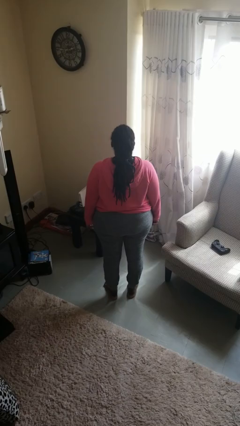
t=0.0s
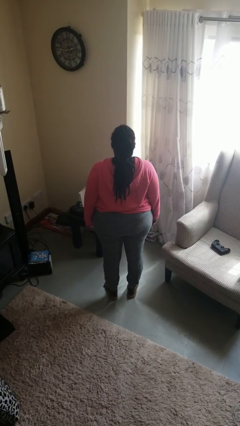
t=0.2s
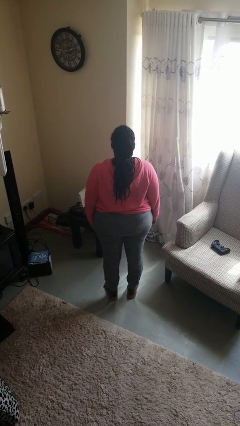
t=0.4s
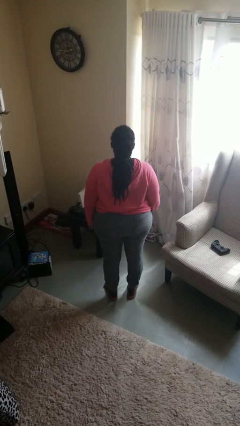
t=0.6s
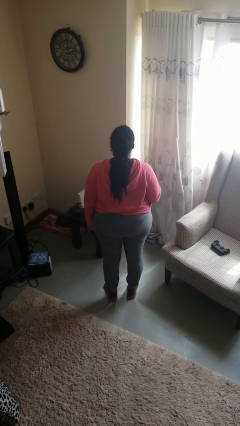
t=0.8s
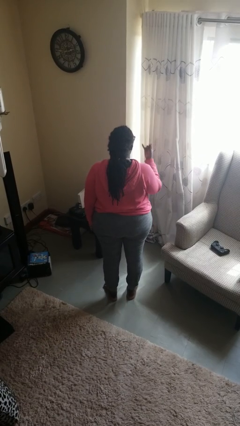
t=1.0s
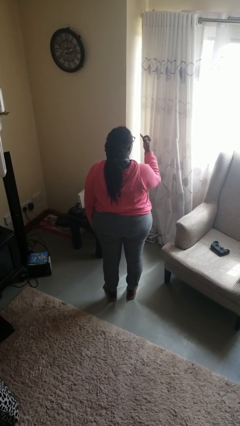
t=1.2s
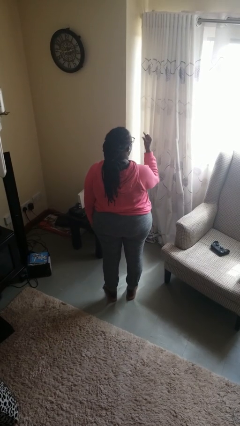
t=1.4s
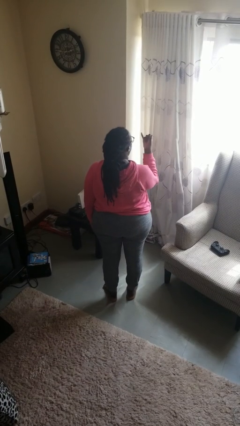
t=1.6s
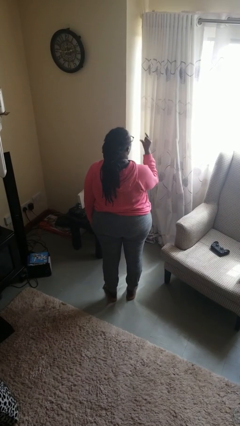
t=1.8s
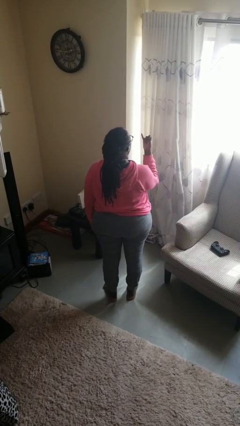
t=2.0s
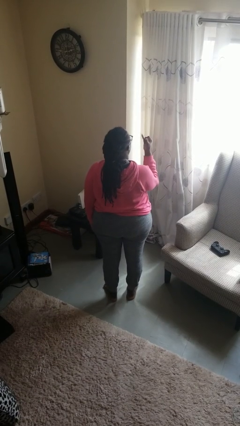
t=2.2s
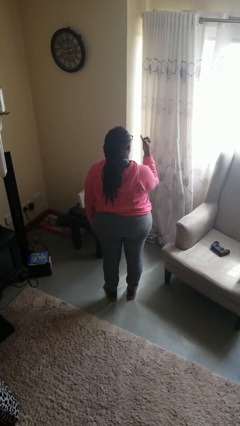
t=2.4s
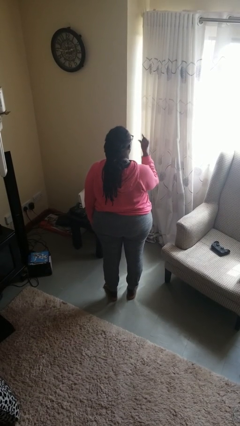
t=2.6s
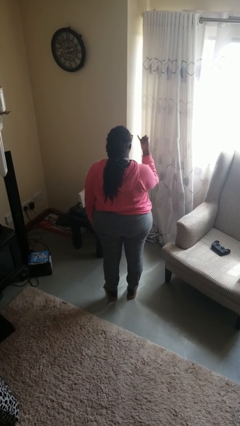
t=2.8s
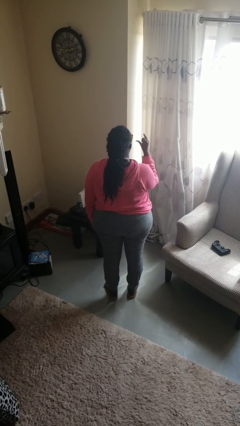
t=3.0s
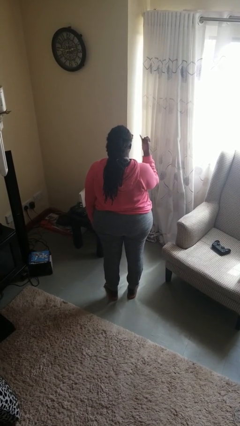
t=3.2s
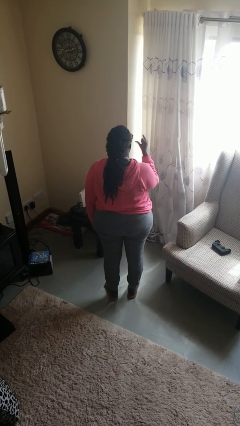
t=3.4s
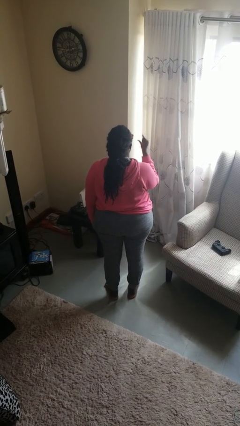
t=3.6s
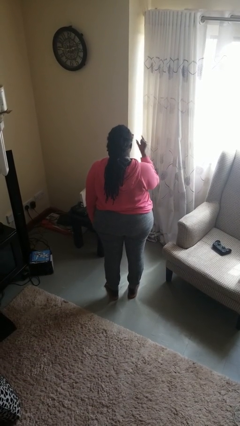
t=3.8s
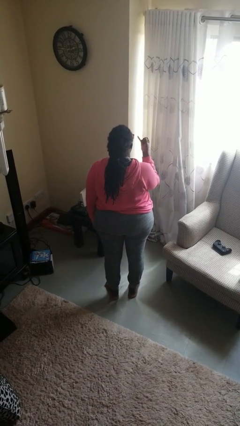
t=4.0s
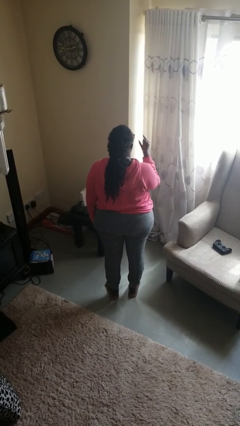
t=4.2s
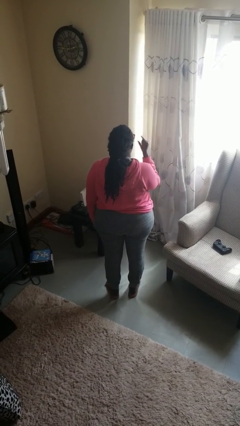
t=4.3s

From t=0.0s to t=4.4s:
person gestures hang loose

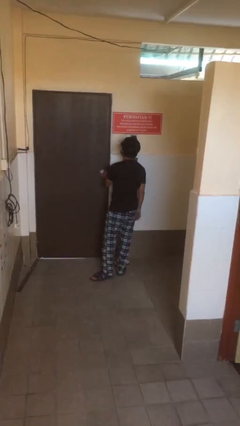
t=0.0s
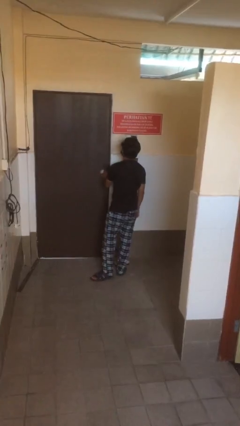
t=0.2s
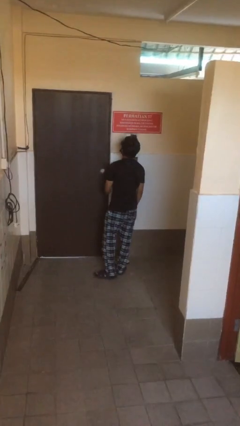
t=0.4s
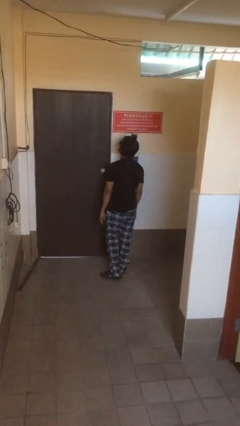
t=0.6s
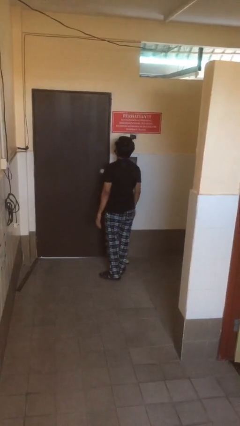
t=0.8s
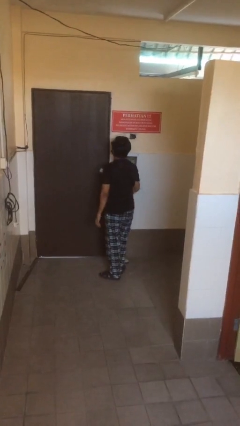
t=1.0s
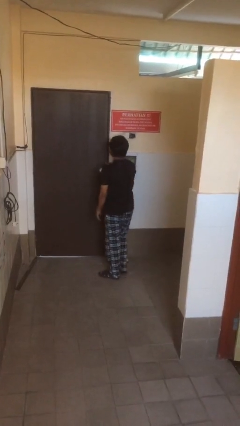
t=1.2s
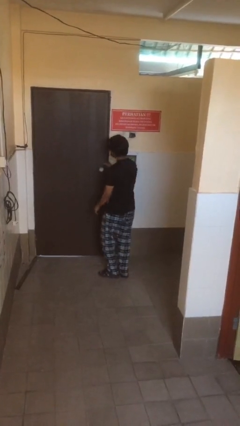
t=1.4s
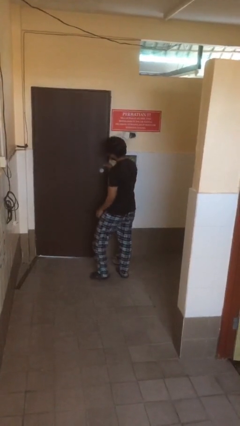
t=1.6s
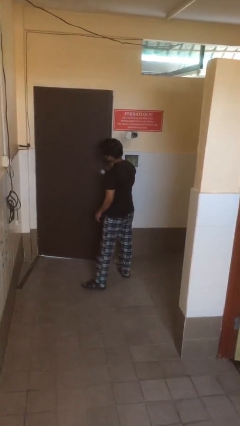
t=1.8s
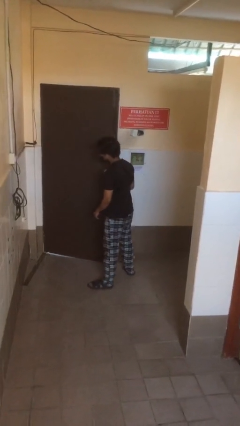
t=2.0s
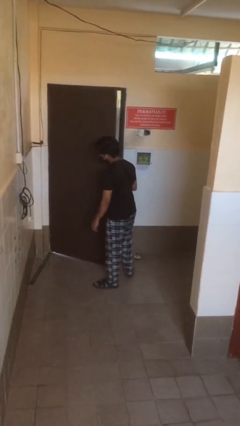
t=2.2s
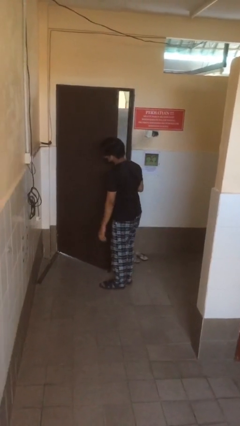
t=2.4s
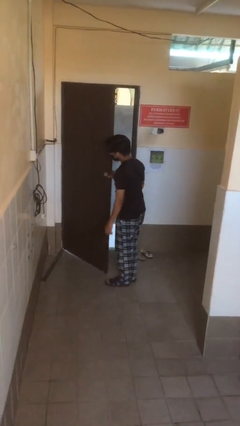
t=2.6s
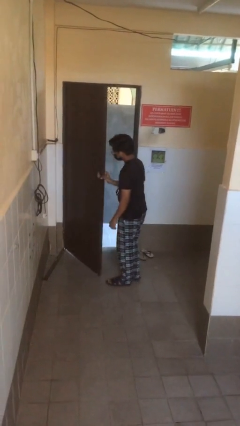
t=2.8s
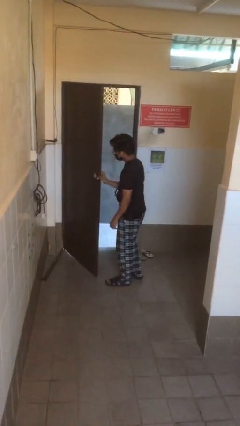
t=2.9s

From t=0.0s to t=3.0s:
person opens facility door

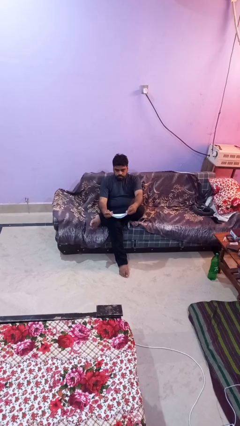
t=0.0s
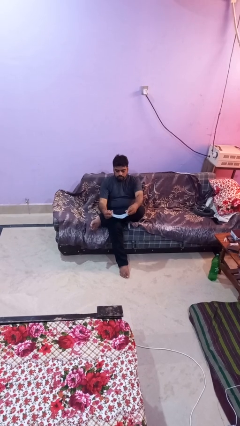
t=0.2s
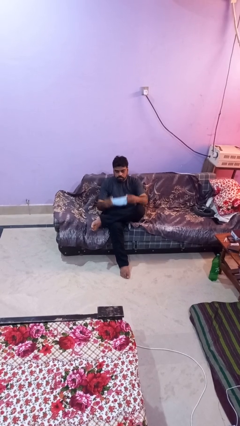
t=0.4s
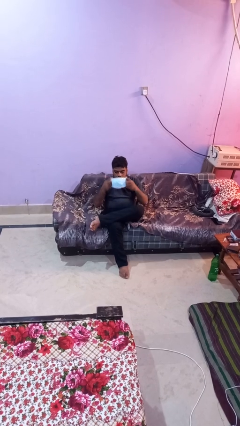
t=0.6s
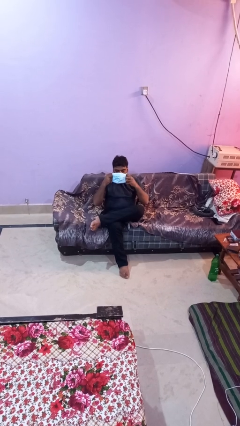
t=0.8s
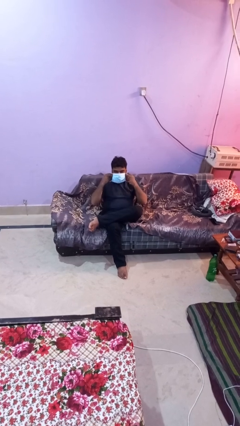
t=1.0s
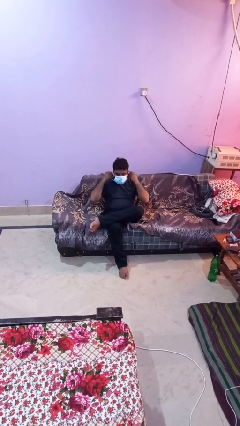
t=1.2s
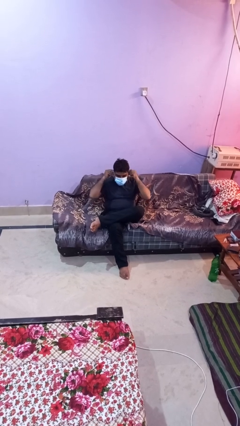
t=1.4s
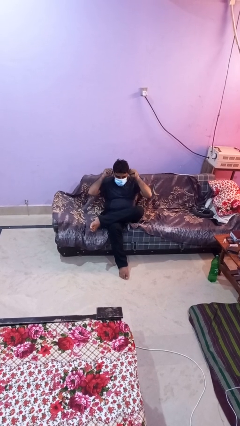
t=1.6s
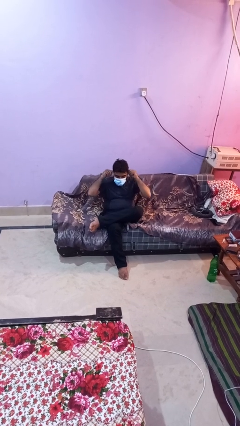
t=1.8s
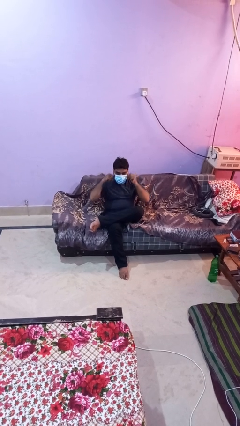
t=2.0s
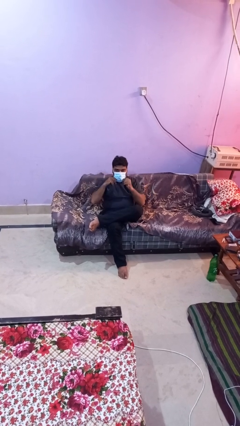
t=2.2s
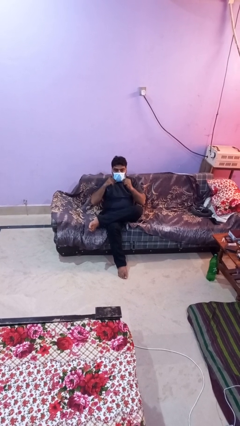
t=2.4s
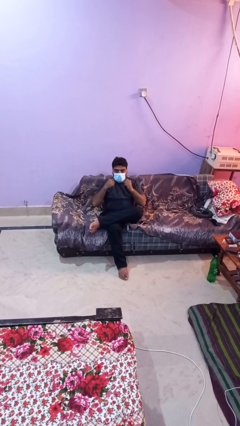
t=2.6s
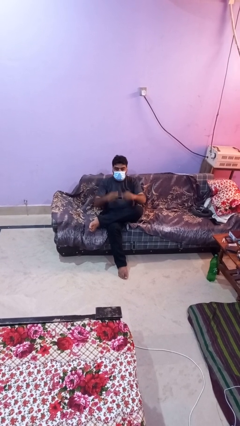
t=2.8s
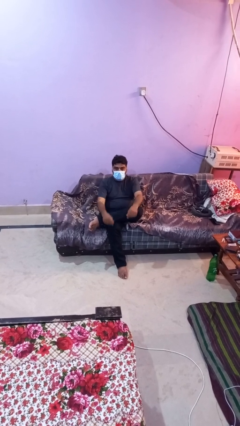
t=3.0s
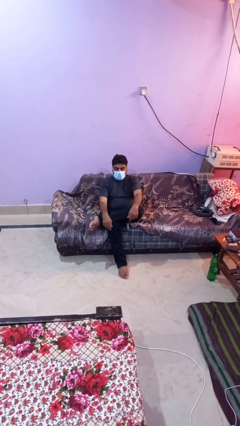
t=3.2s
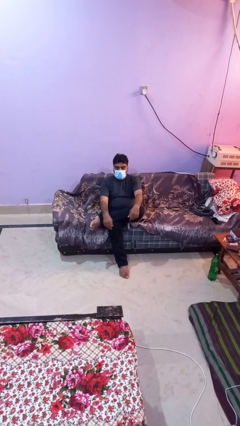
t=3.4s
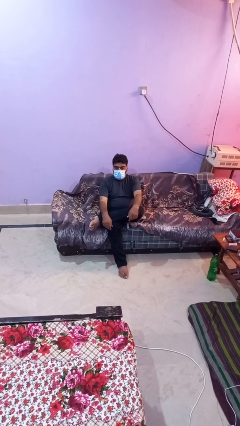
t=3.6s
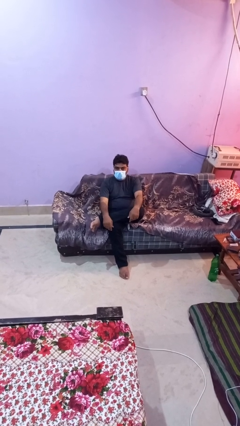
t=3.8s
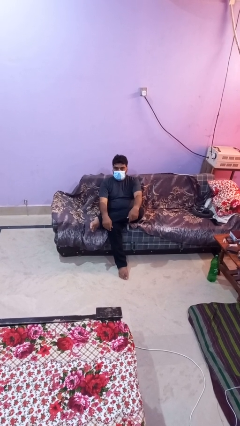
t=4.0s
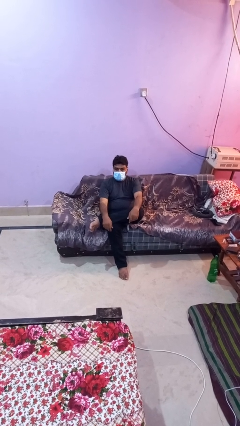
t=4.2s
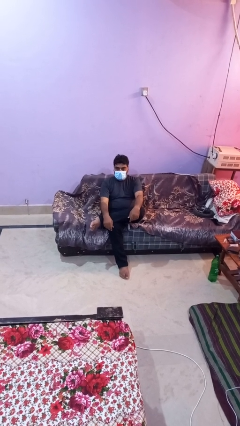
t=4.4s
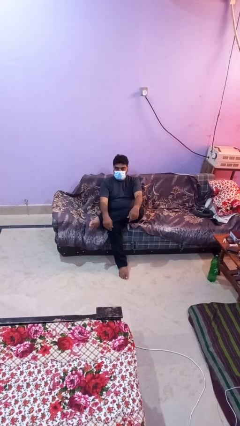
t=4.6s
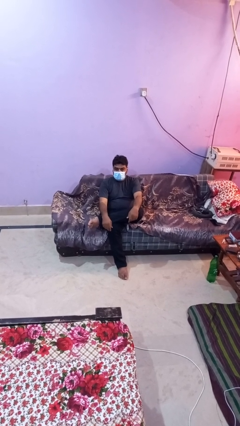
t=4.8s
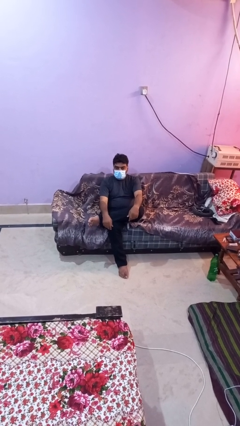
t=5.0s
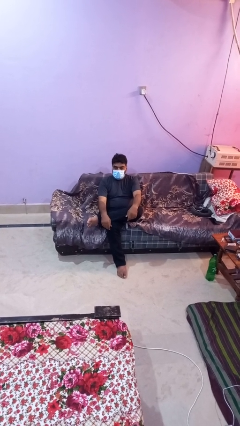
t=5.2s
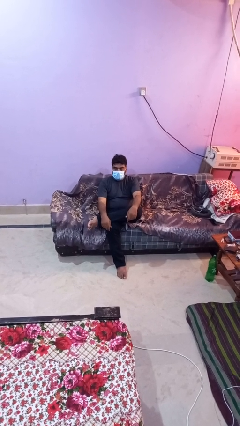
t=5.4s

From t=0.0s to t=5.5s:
person puts on facemask

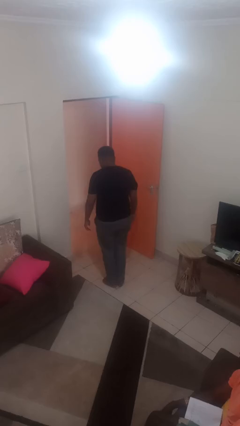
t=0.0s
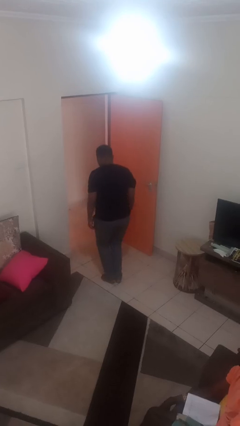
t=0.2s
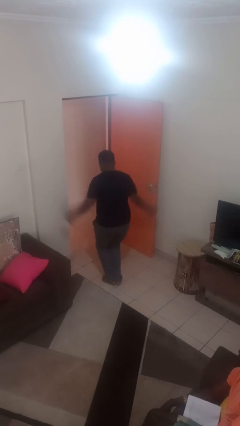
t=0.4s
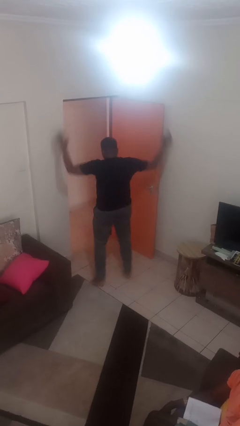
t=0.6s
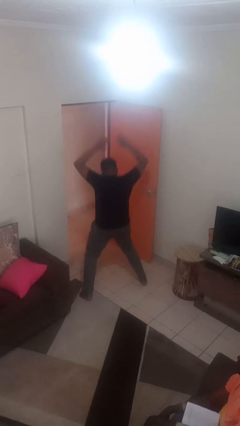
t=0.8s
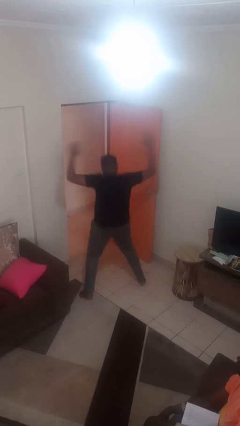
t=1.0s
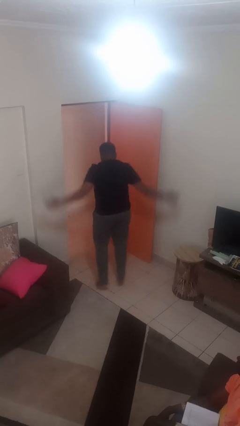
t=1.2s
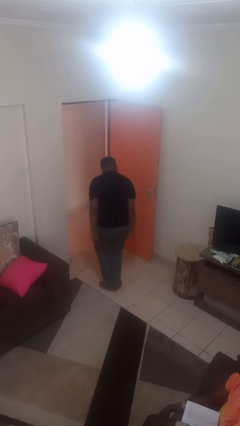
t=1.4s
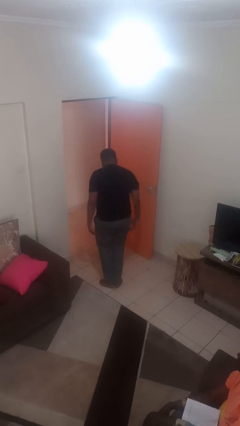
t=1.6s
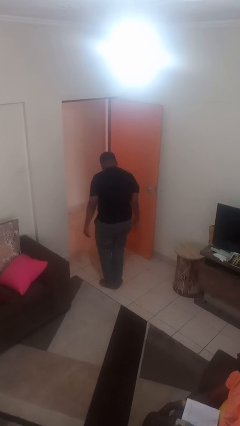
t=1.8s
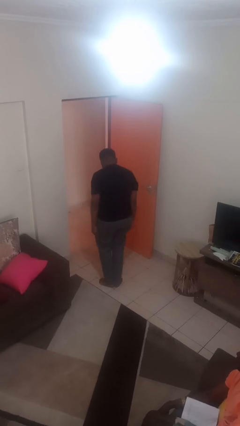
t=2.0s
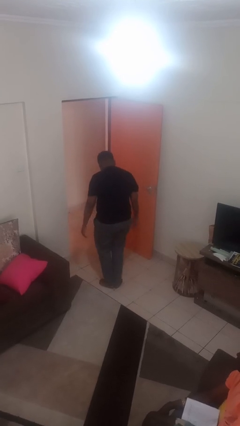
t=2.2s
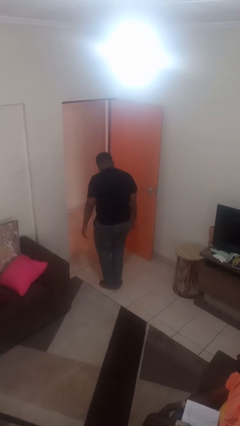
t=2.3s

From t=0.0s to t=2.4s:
person exercises with jumping jacks

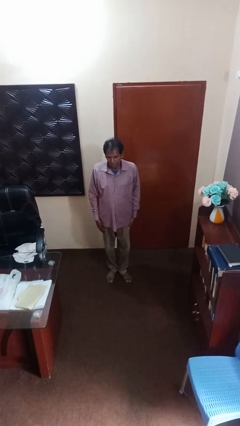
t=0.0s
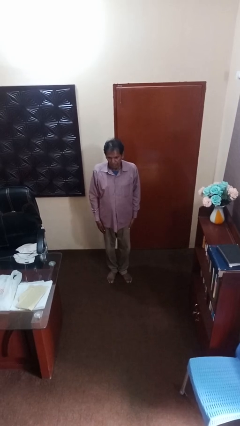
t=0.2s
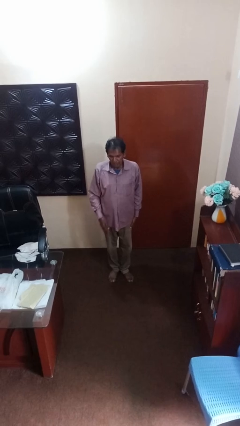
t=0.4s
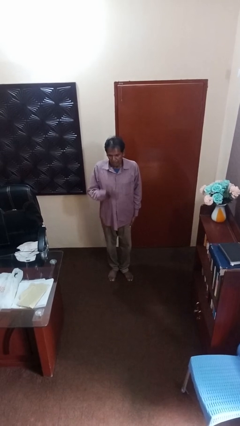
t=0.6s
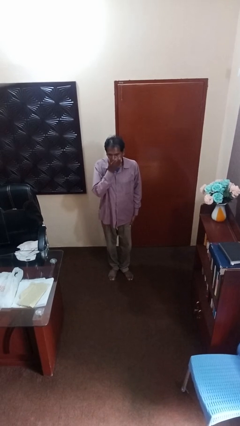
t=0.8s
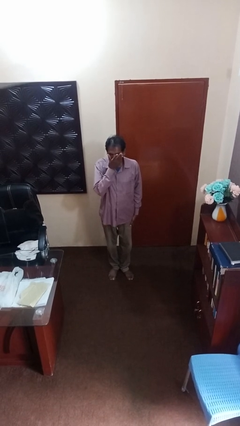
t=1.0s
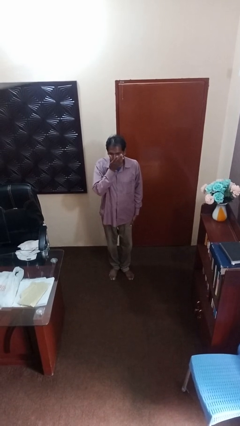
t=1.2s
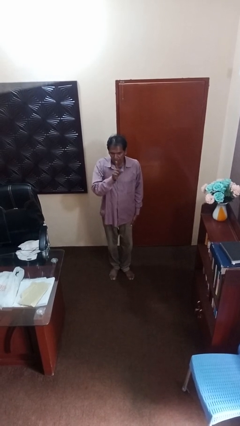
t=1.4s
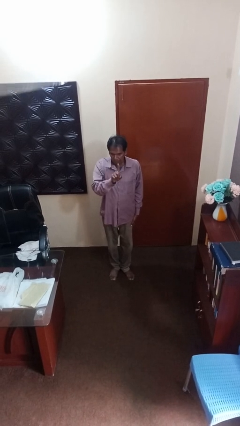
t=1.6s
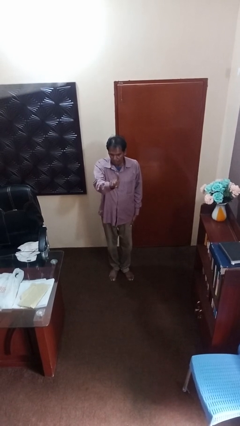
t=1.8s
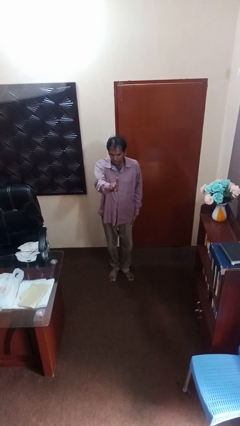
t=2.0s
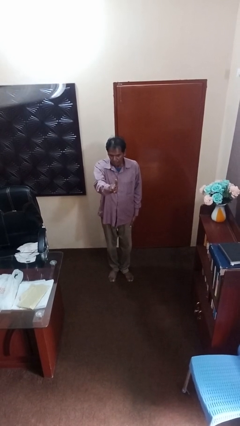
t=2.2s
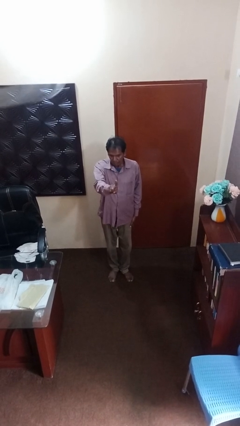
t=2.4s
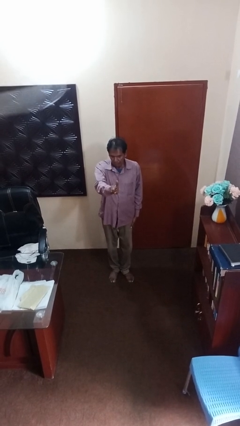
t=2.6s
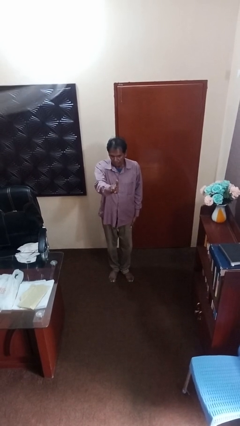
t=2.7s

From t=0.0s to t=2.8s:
person gestures behind me
